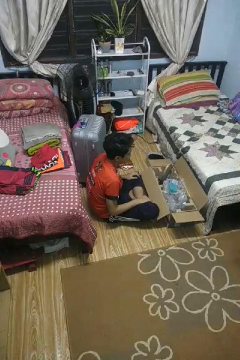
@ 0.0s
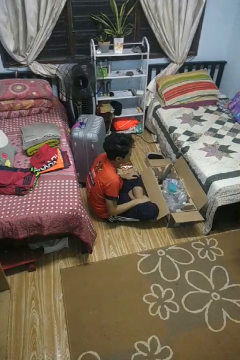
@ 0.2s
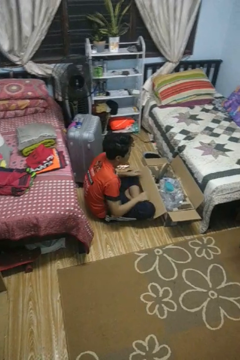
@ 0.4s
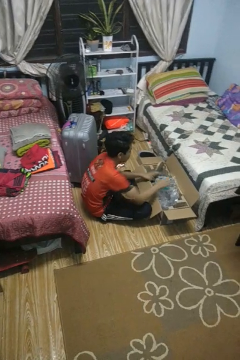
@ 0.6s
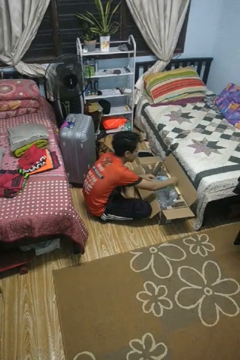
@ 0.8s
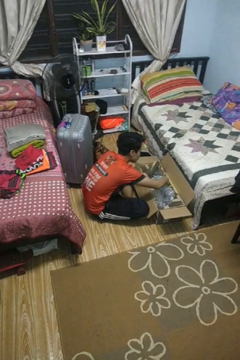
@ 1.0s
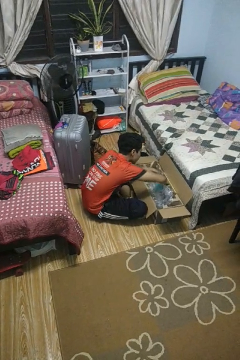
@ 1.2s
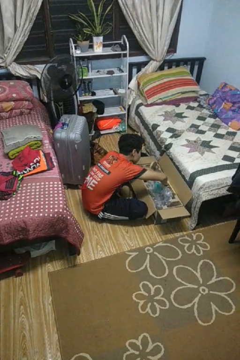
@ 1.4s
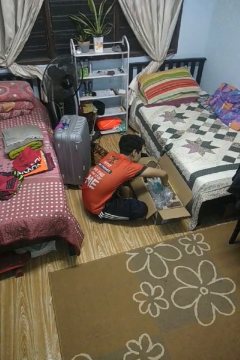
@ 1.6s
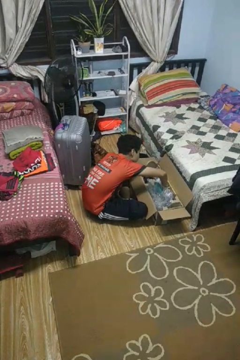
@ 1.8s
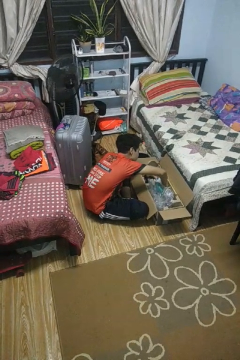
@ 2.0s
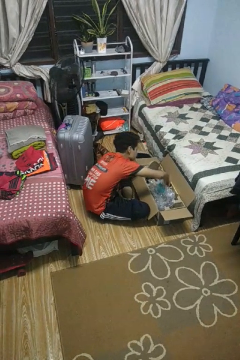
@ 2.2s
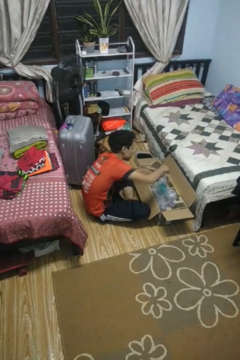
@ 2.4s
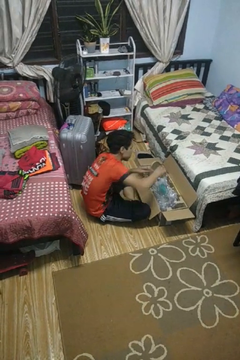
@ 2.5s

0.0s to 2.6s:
person searches in box

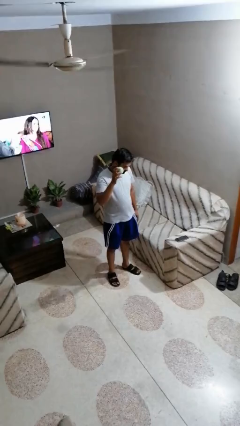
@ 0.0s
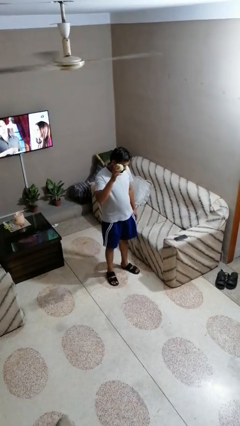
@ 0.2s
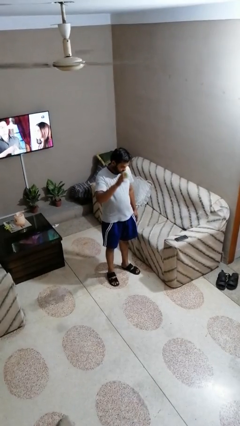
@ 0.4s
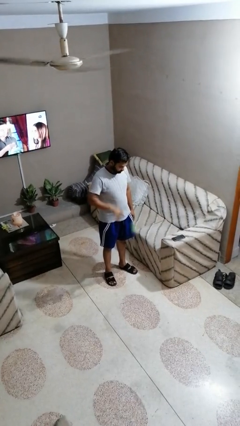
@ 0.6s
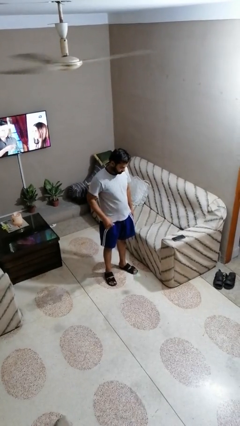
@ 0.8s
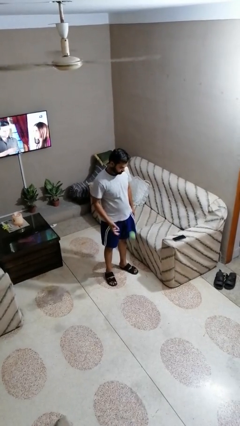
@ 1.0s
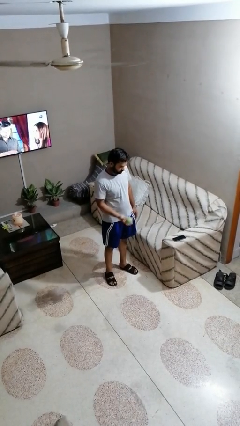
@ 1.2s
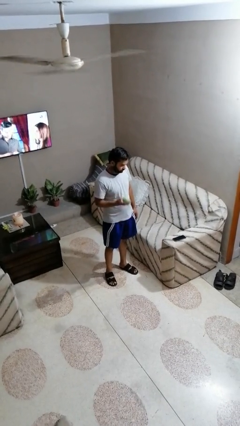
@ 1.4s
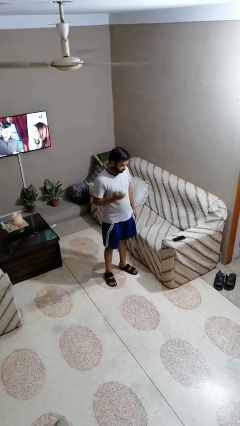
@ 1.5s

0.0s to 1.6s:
person bounces ball on floor

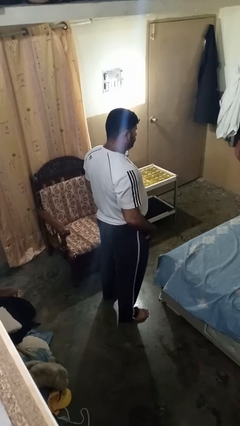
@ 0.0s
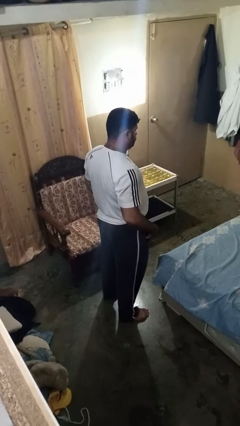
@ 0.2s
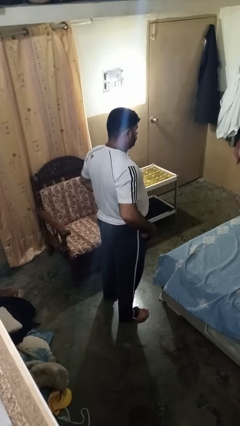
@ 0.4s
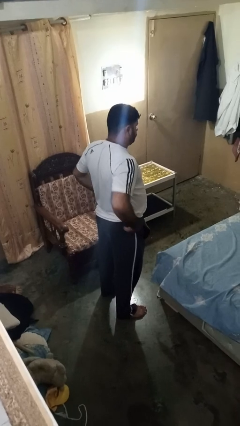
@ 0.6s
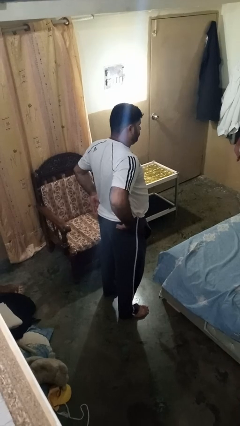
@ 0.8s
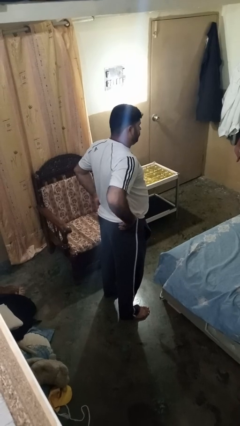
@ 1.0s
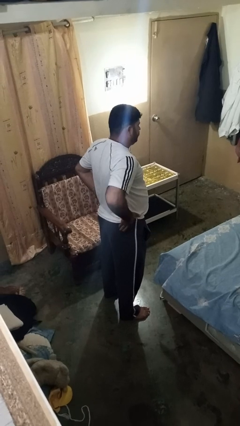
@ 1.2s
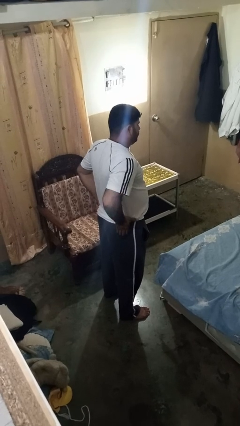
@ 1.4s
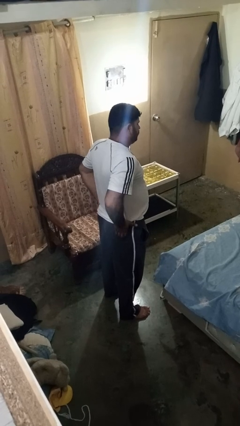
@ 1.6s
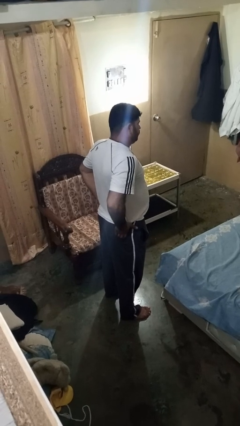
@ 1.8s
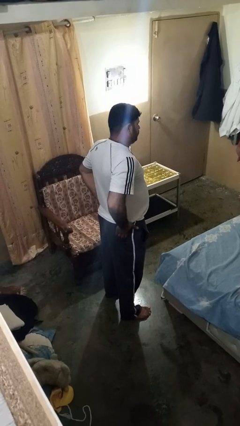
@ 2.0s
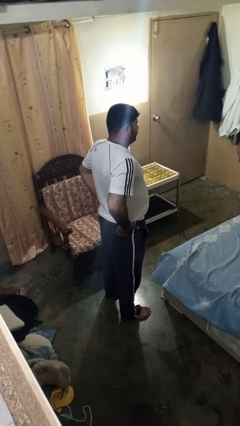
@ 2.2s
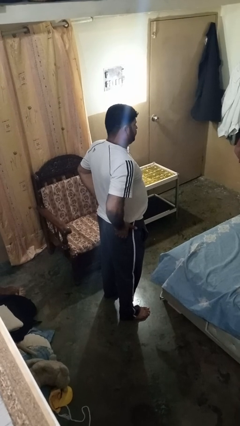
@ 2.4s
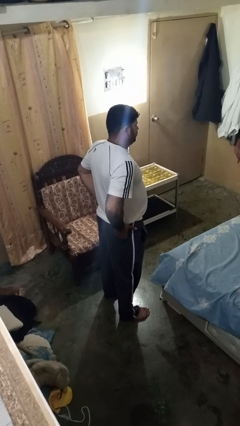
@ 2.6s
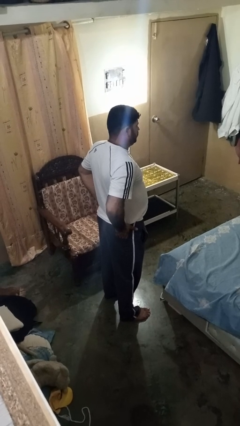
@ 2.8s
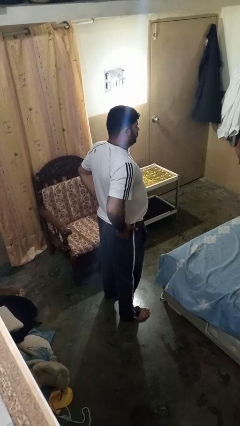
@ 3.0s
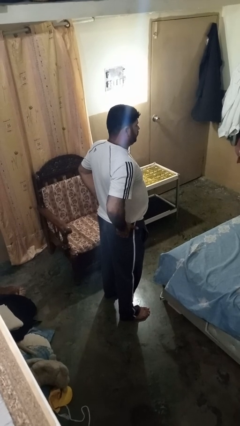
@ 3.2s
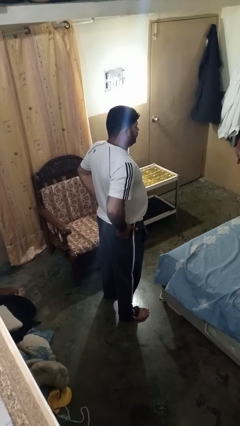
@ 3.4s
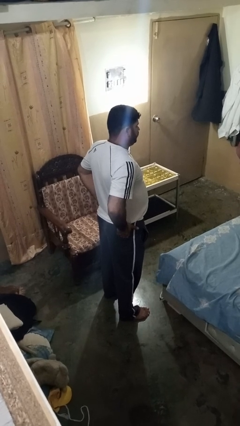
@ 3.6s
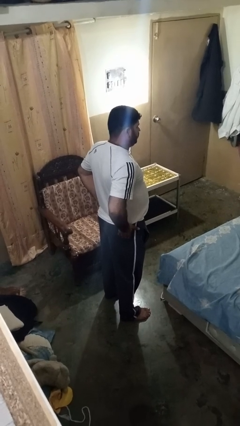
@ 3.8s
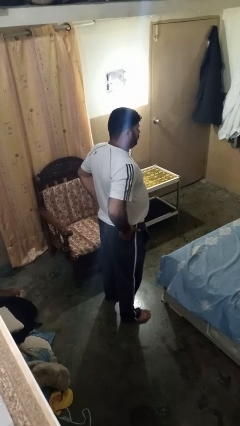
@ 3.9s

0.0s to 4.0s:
person puts hands in back pockets

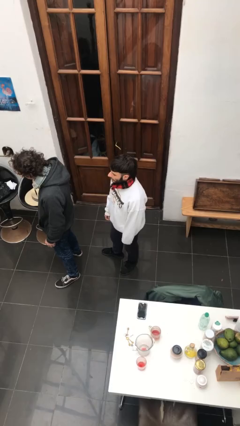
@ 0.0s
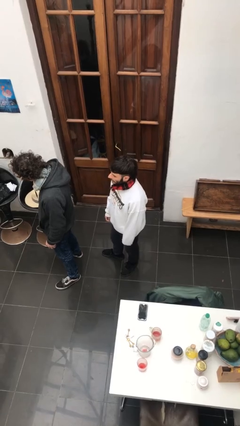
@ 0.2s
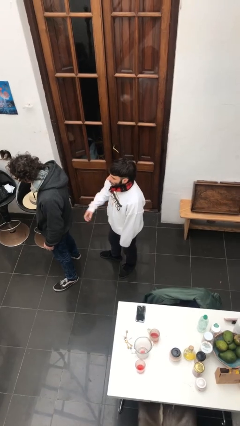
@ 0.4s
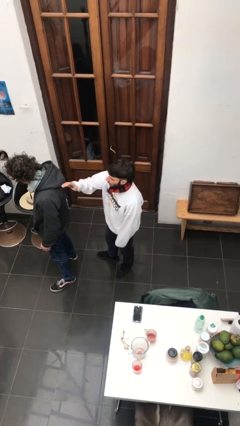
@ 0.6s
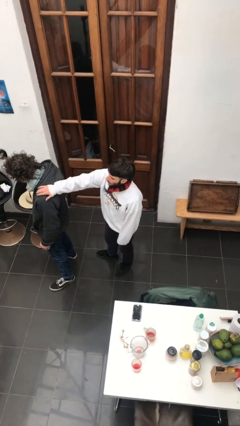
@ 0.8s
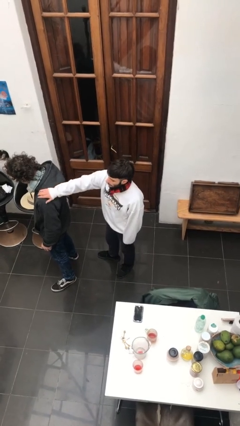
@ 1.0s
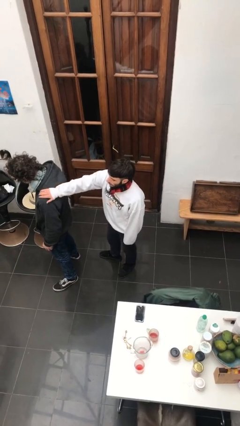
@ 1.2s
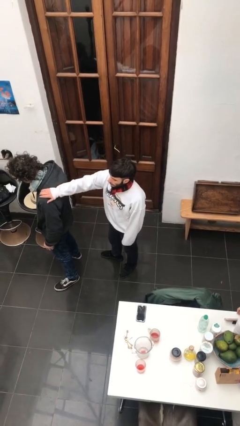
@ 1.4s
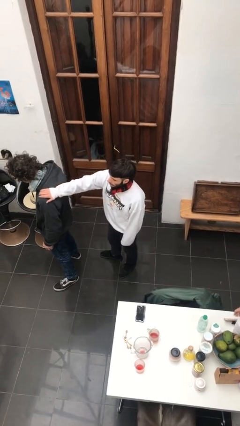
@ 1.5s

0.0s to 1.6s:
person grabs person by shoulder

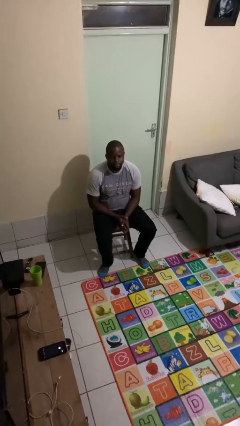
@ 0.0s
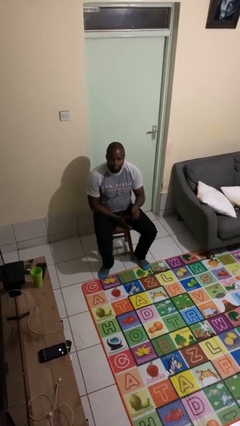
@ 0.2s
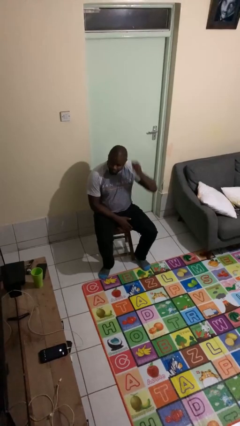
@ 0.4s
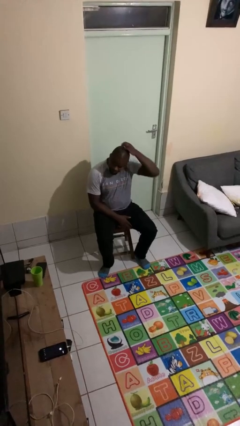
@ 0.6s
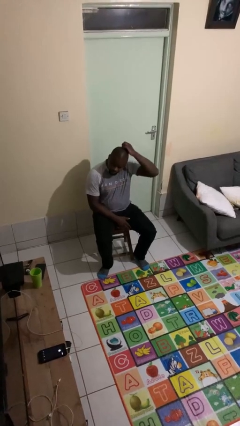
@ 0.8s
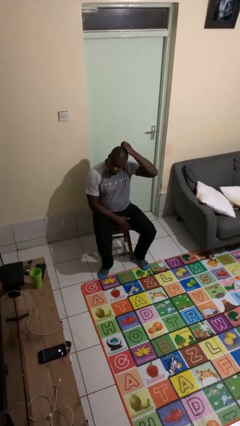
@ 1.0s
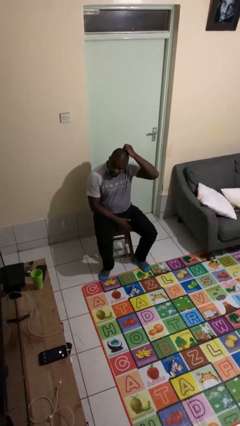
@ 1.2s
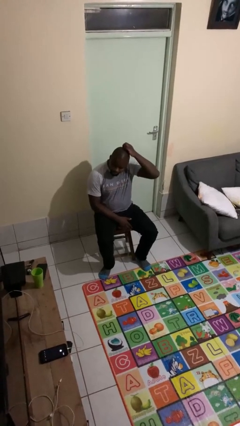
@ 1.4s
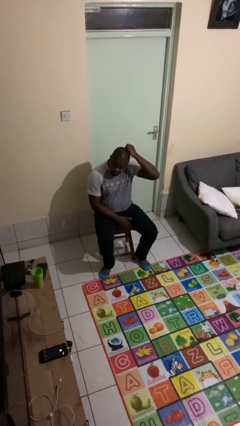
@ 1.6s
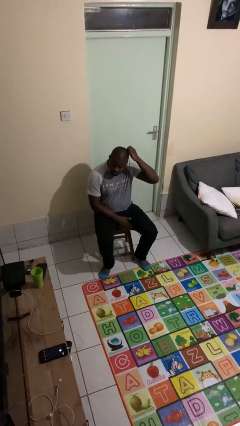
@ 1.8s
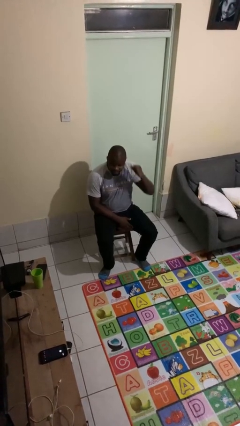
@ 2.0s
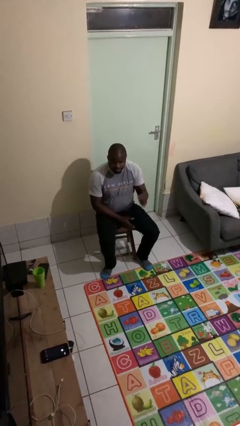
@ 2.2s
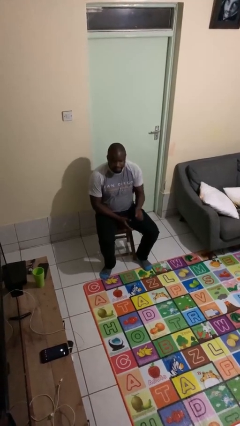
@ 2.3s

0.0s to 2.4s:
person scratches face

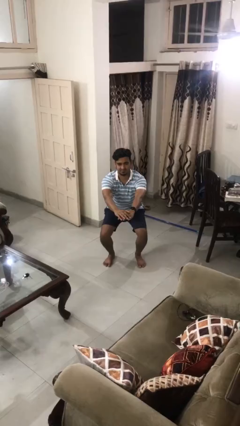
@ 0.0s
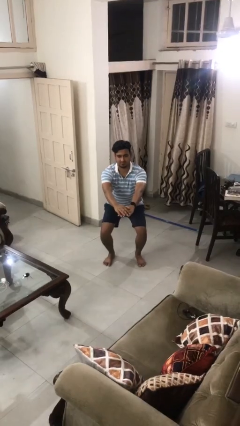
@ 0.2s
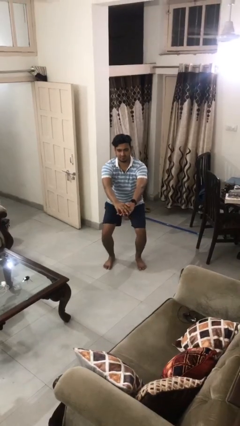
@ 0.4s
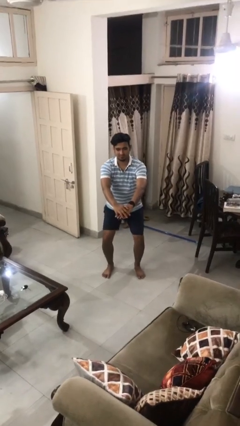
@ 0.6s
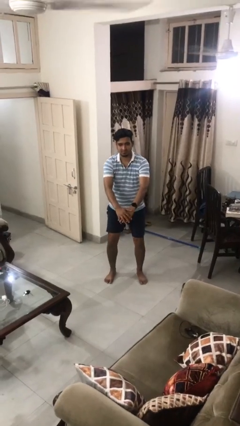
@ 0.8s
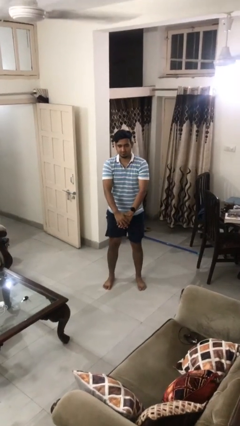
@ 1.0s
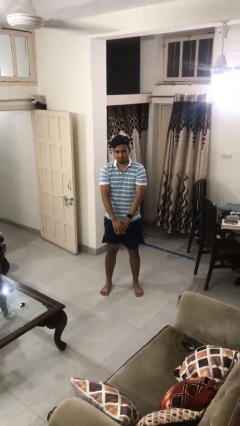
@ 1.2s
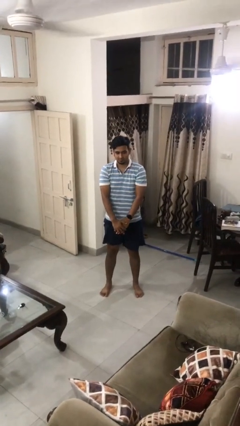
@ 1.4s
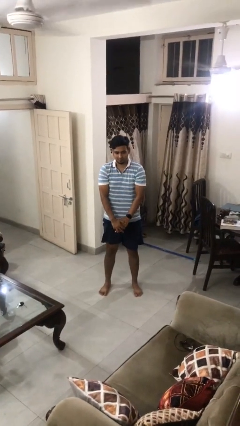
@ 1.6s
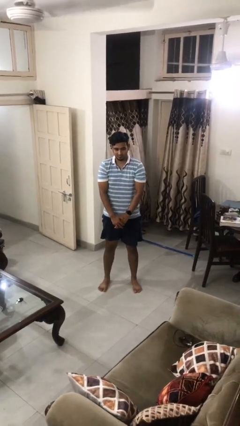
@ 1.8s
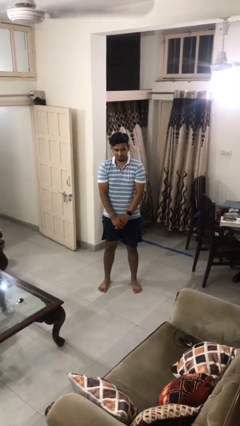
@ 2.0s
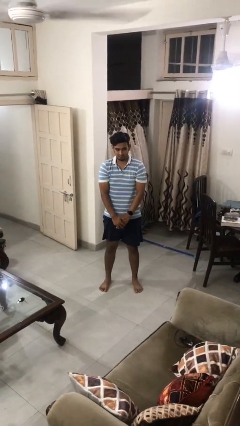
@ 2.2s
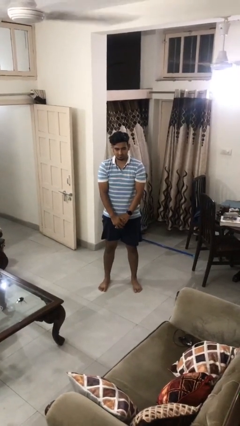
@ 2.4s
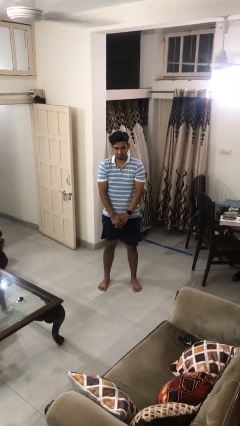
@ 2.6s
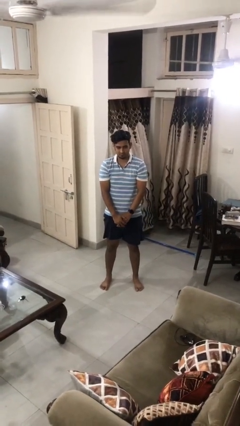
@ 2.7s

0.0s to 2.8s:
person stands up

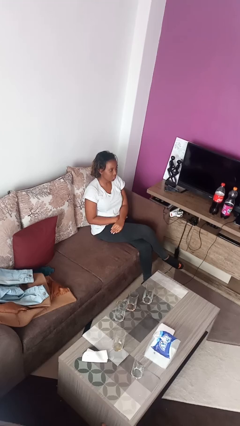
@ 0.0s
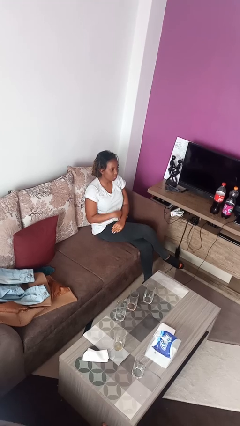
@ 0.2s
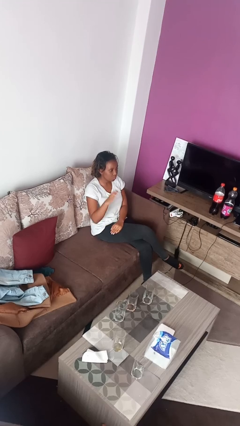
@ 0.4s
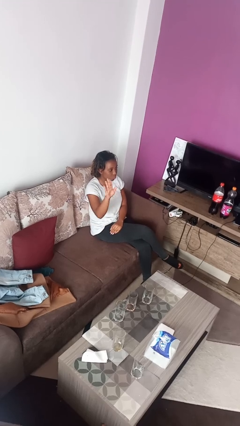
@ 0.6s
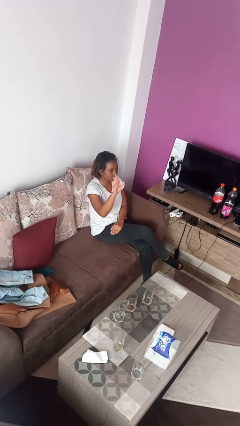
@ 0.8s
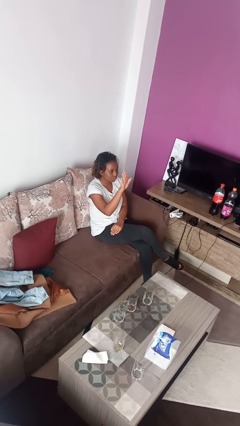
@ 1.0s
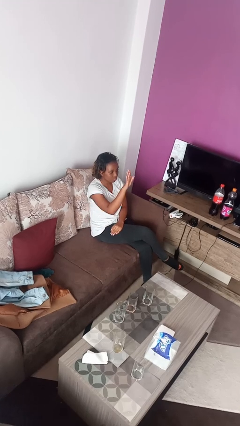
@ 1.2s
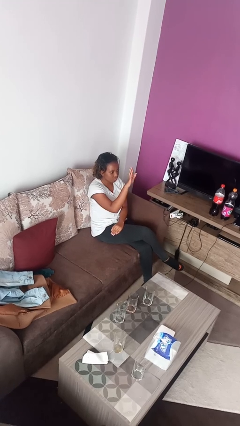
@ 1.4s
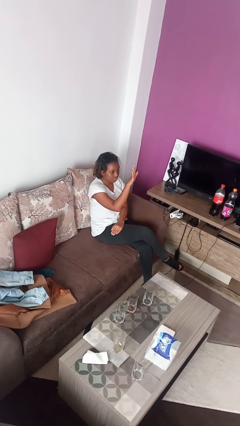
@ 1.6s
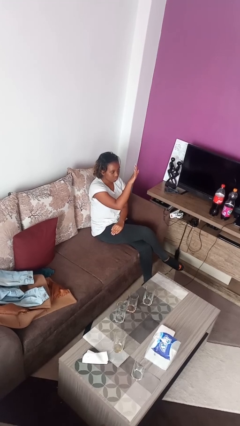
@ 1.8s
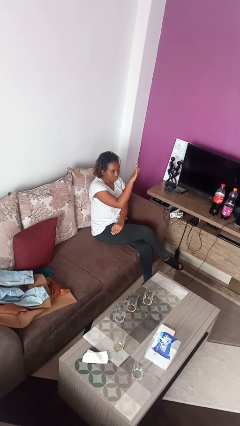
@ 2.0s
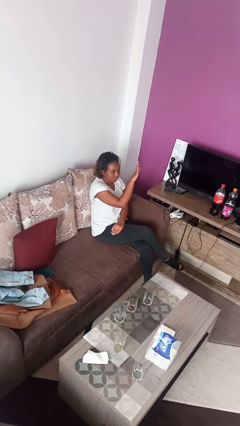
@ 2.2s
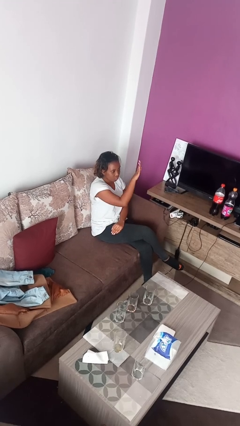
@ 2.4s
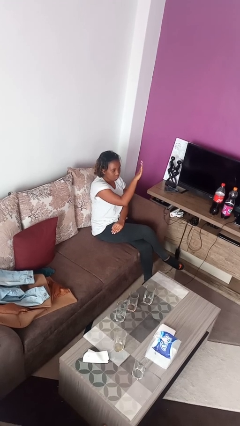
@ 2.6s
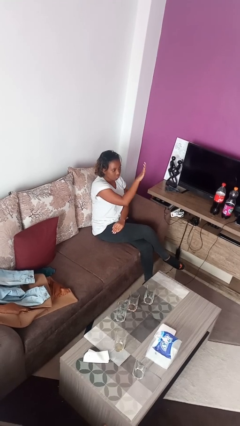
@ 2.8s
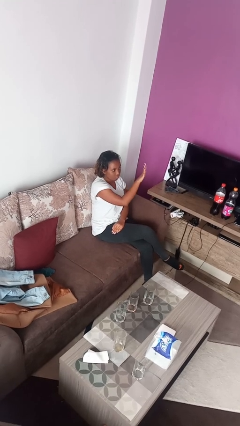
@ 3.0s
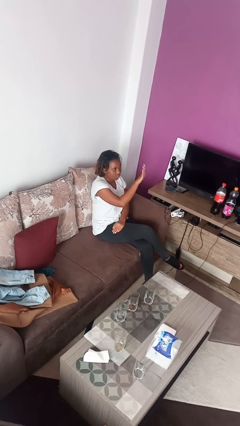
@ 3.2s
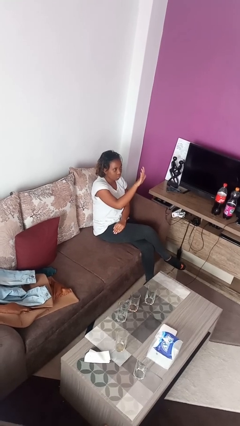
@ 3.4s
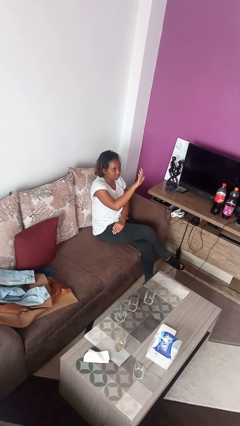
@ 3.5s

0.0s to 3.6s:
person gestures swipe left
